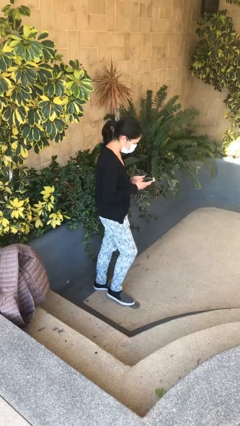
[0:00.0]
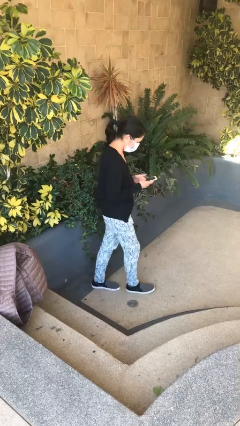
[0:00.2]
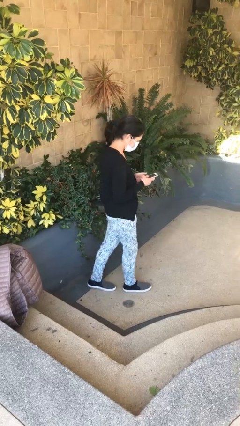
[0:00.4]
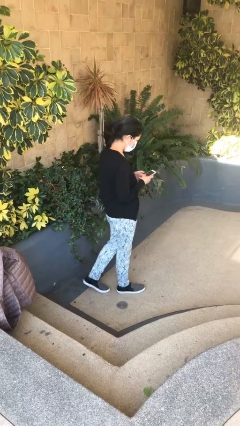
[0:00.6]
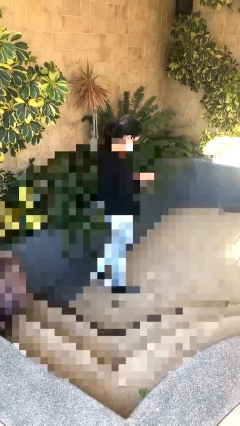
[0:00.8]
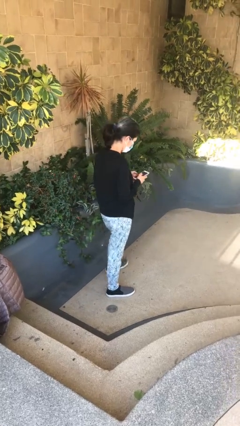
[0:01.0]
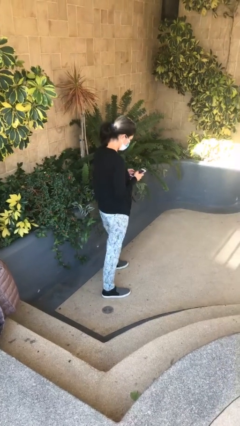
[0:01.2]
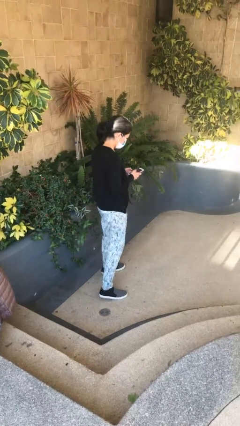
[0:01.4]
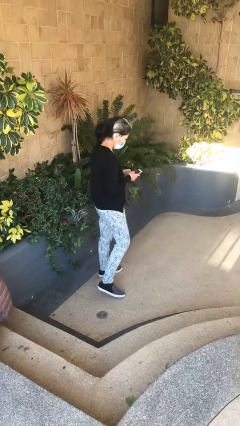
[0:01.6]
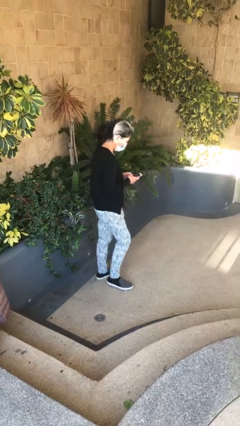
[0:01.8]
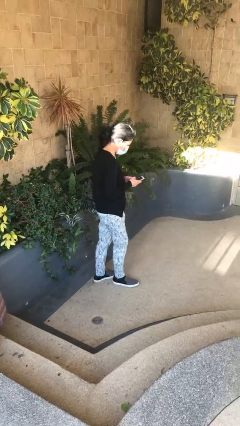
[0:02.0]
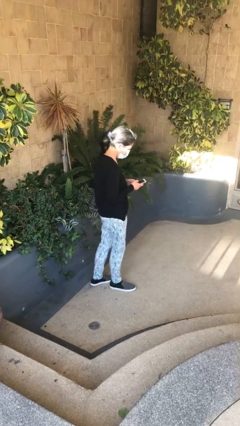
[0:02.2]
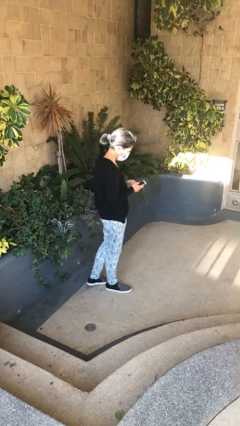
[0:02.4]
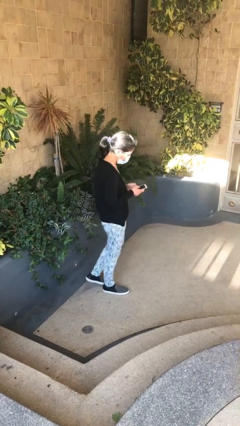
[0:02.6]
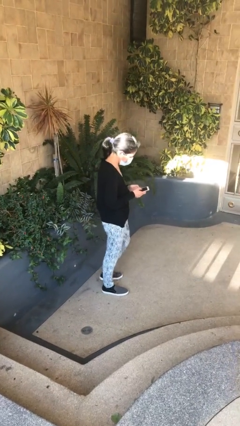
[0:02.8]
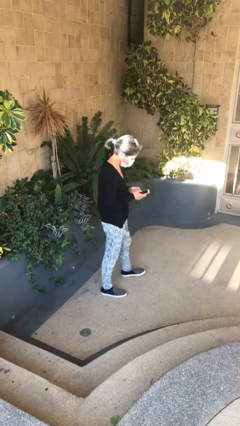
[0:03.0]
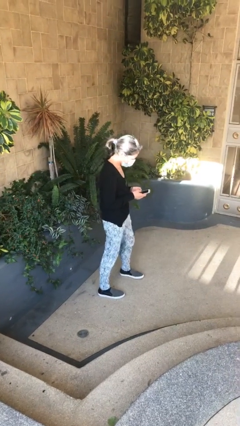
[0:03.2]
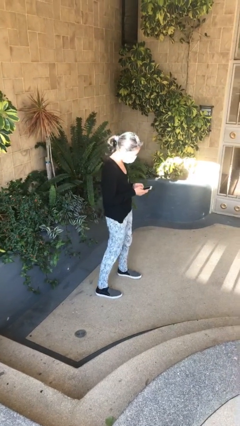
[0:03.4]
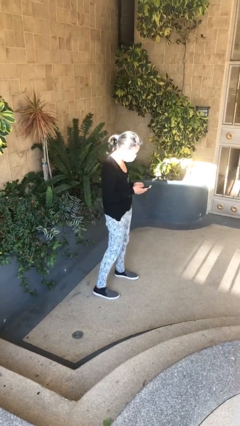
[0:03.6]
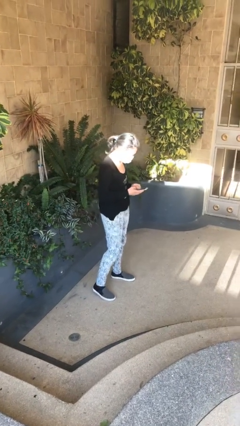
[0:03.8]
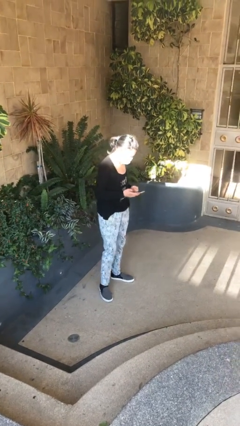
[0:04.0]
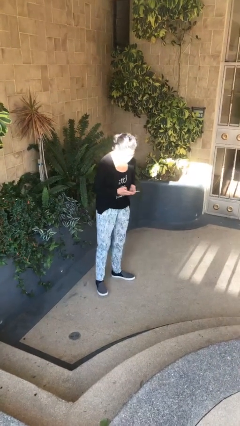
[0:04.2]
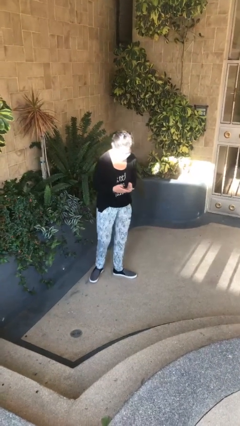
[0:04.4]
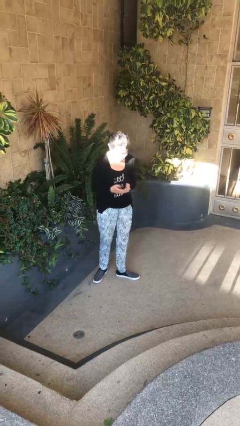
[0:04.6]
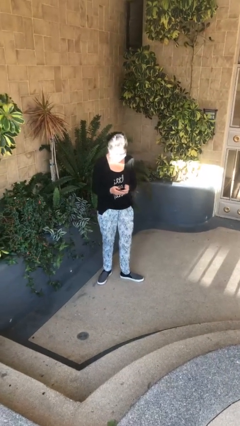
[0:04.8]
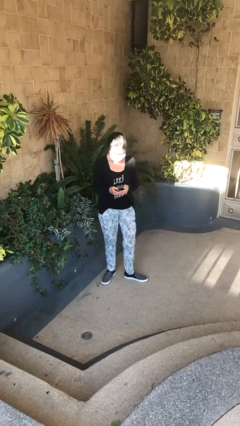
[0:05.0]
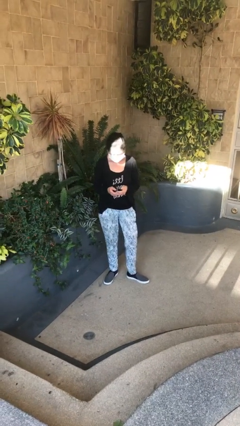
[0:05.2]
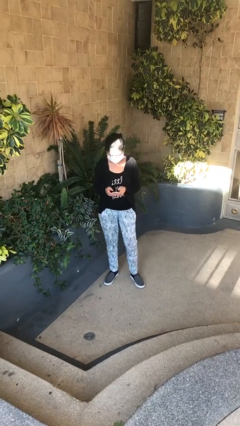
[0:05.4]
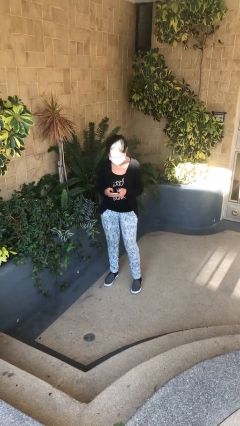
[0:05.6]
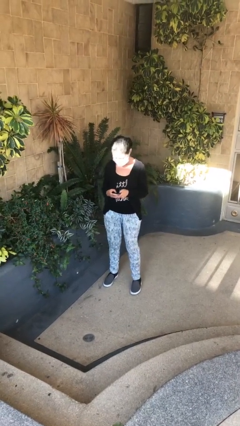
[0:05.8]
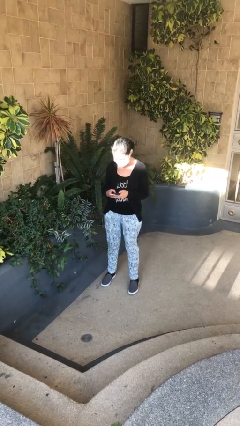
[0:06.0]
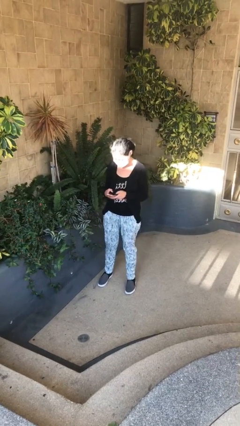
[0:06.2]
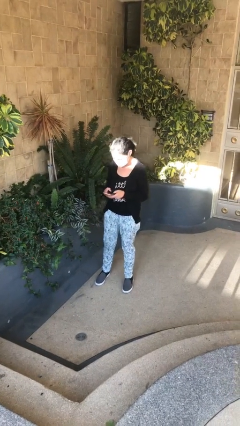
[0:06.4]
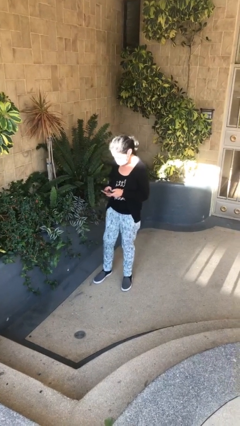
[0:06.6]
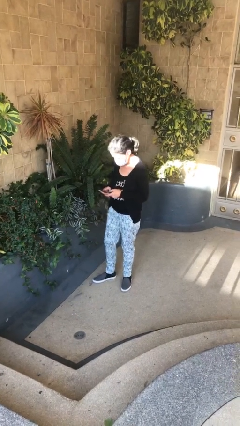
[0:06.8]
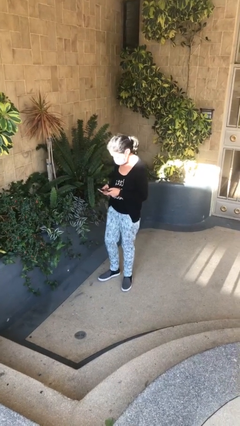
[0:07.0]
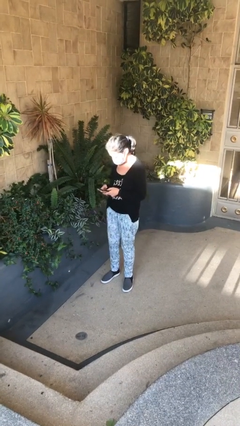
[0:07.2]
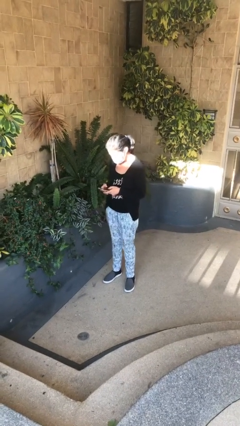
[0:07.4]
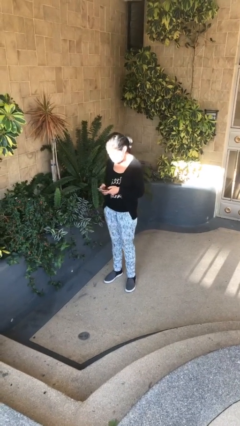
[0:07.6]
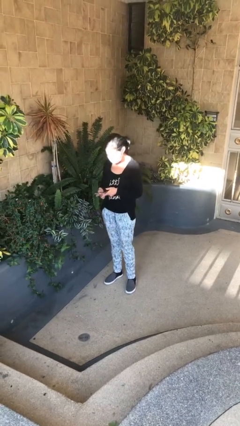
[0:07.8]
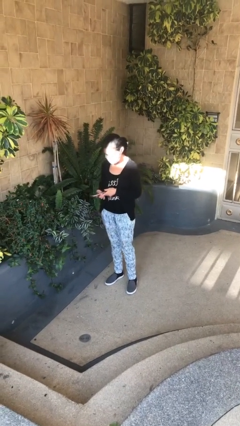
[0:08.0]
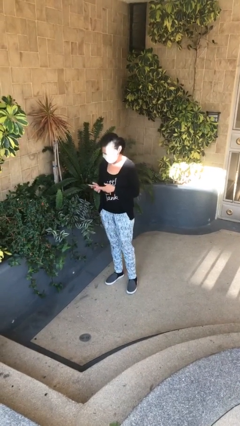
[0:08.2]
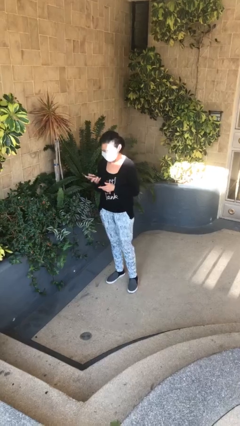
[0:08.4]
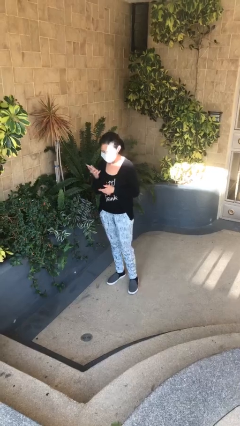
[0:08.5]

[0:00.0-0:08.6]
person texts on phone

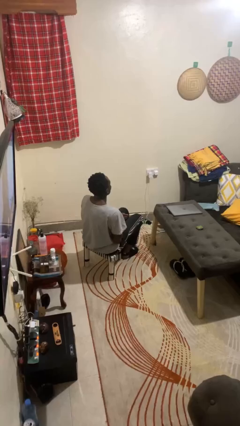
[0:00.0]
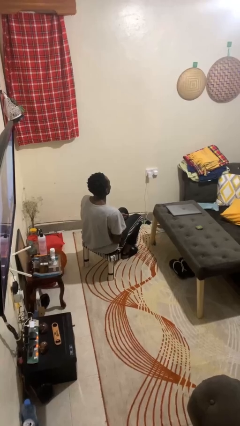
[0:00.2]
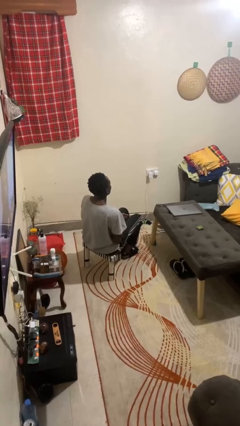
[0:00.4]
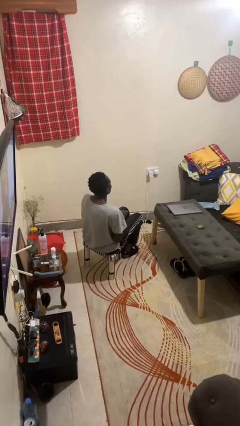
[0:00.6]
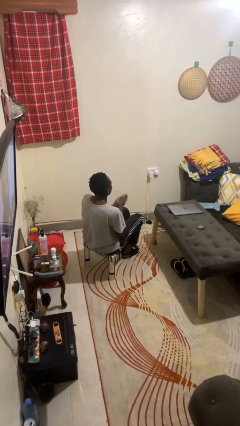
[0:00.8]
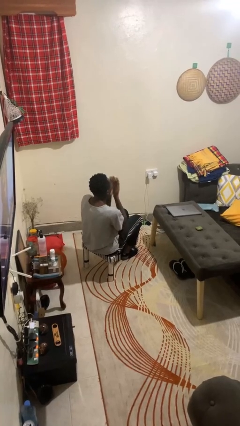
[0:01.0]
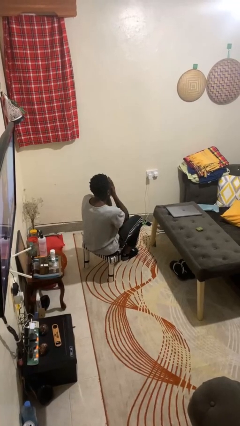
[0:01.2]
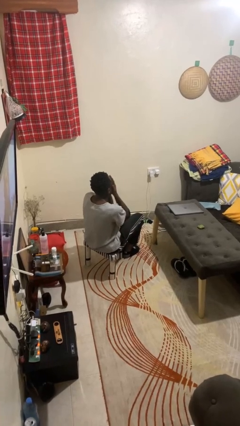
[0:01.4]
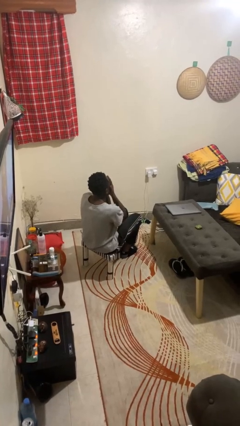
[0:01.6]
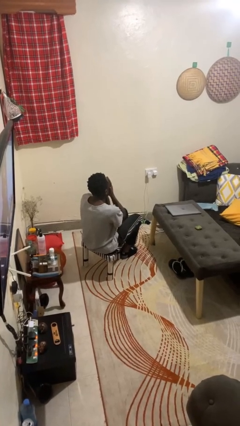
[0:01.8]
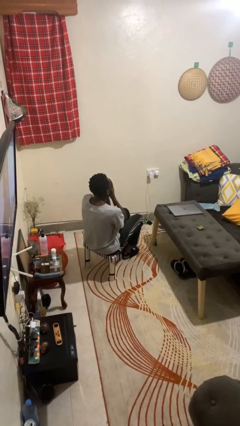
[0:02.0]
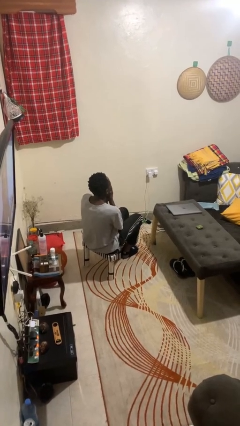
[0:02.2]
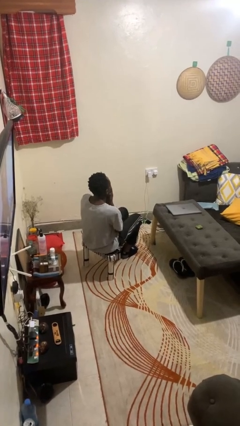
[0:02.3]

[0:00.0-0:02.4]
person covers face with hands

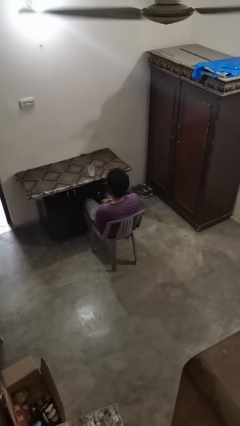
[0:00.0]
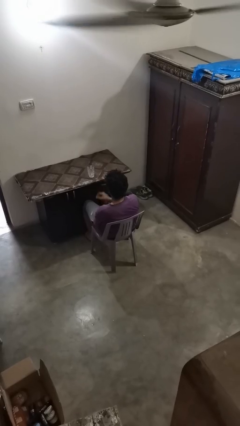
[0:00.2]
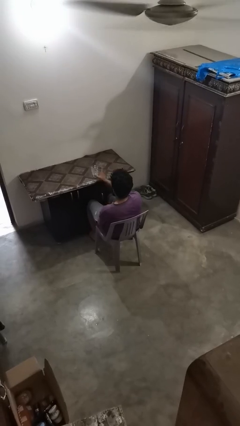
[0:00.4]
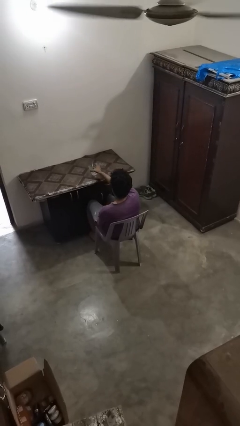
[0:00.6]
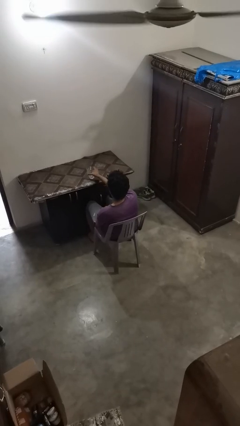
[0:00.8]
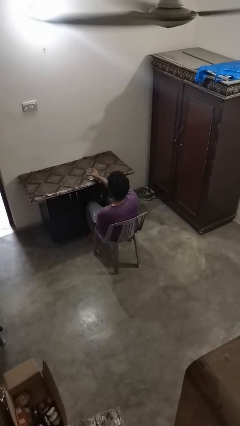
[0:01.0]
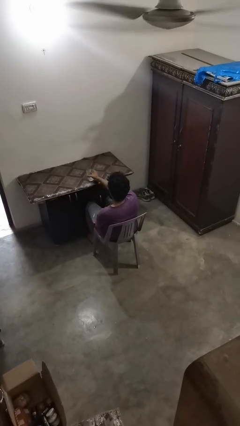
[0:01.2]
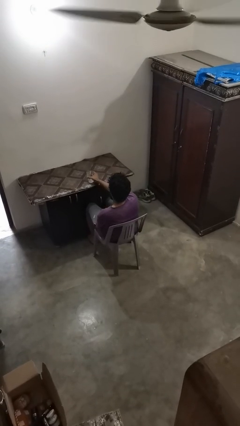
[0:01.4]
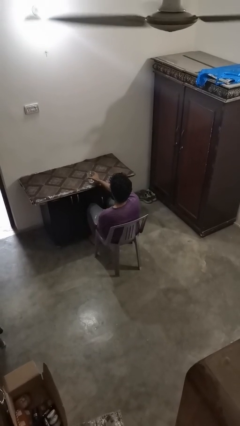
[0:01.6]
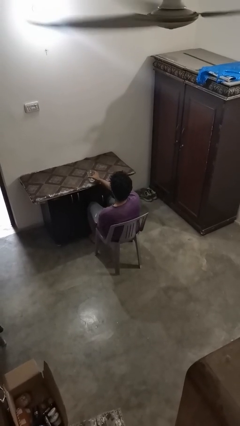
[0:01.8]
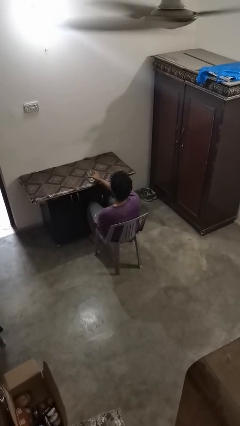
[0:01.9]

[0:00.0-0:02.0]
person knocks over glass

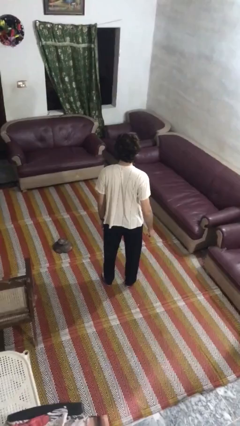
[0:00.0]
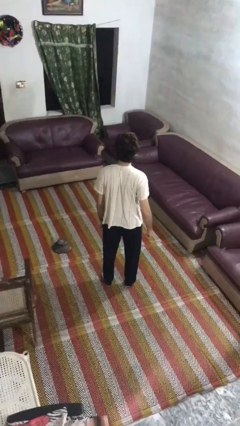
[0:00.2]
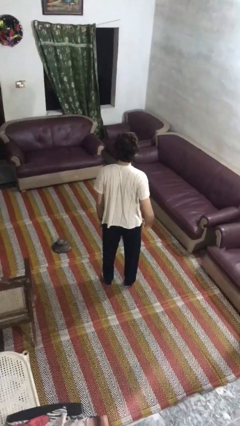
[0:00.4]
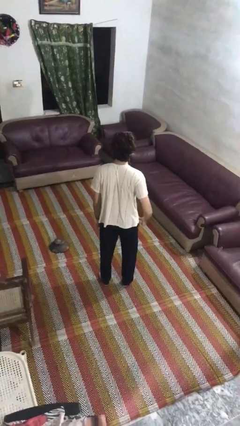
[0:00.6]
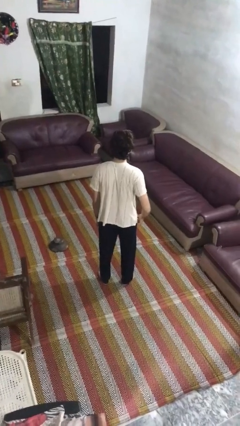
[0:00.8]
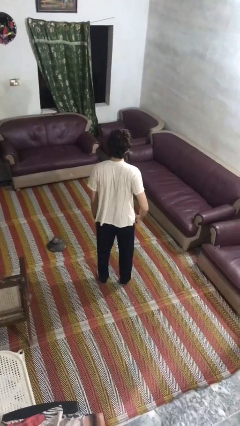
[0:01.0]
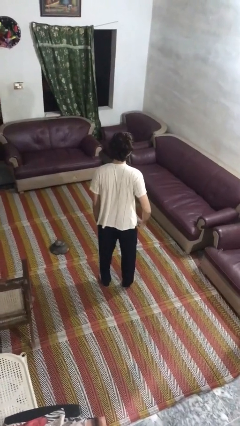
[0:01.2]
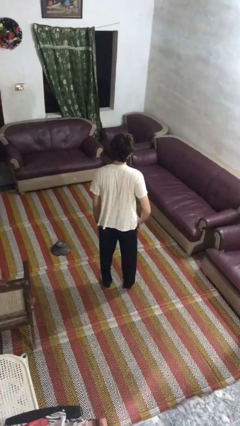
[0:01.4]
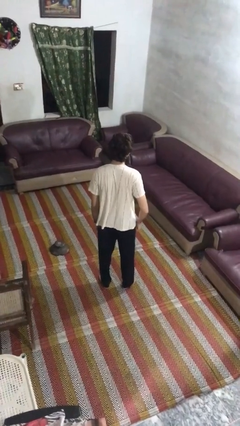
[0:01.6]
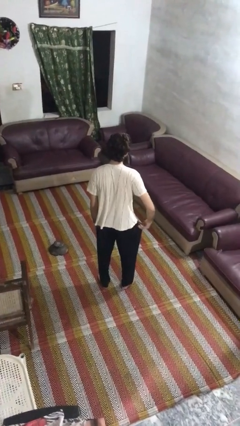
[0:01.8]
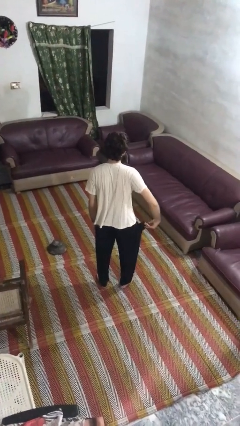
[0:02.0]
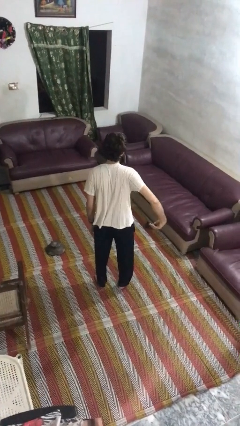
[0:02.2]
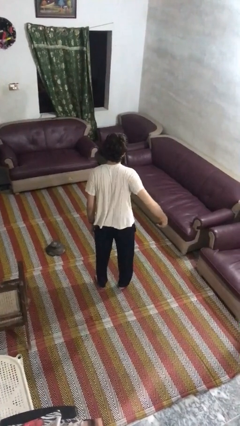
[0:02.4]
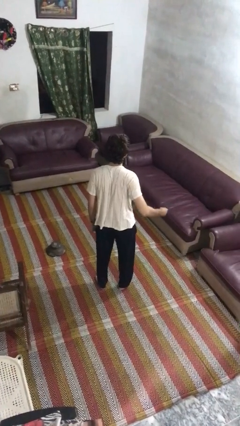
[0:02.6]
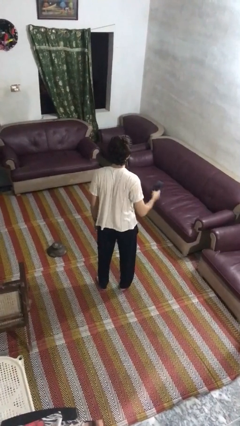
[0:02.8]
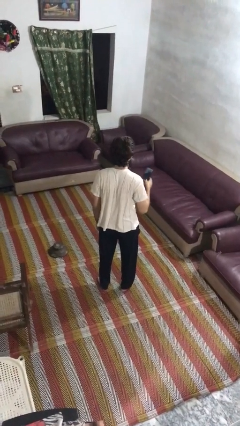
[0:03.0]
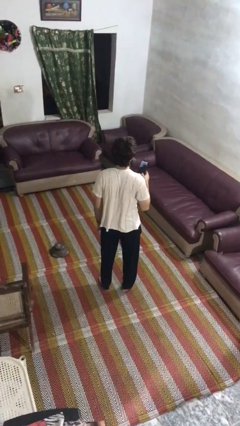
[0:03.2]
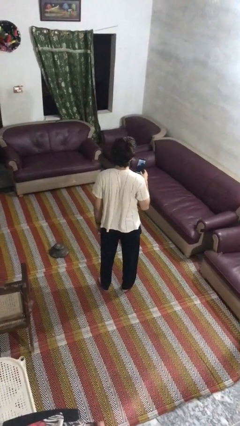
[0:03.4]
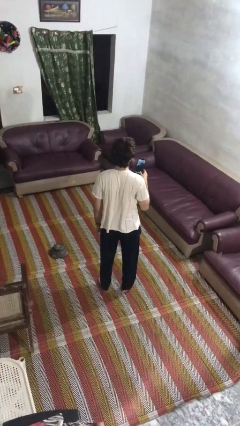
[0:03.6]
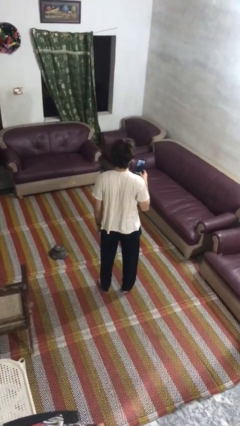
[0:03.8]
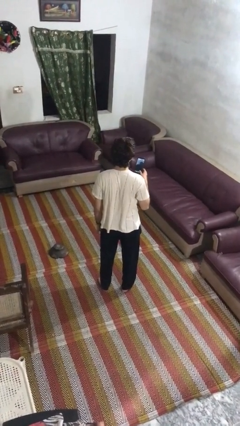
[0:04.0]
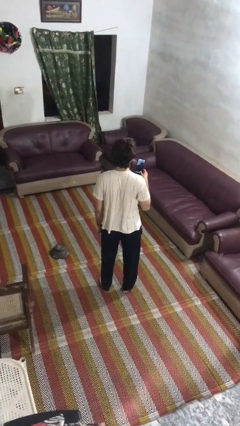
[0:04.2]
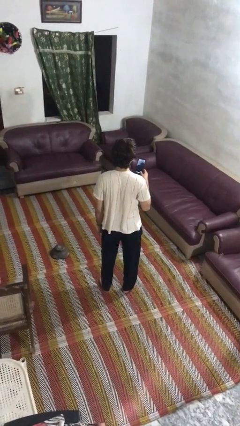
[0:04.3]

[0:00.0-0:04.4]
person takes phone from pocket

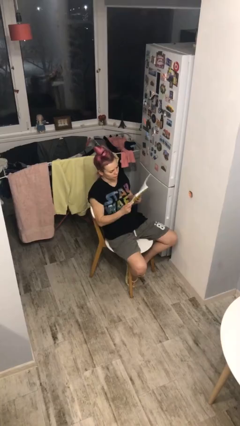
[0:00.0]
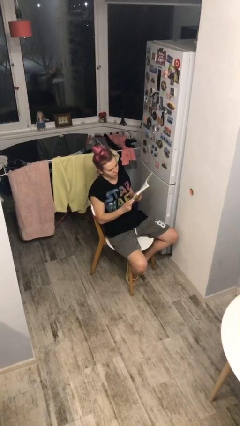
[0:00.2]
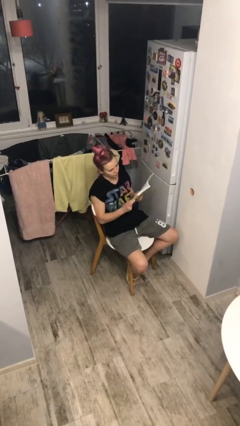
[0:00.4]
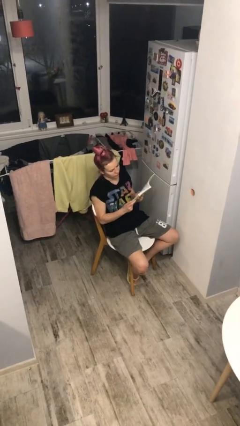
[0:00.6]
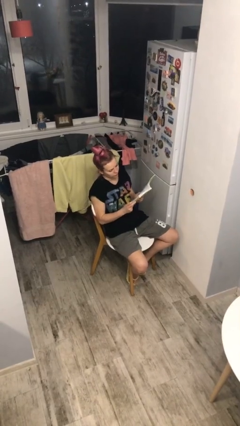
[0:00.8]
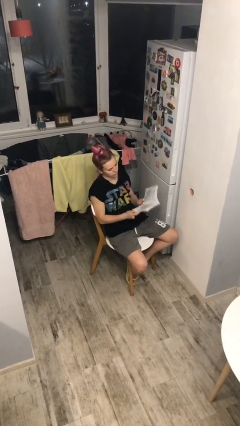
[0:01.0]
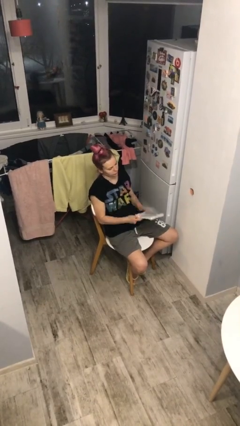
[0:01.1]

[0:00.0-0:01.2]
person reads document
